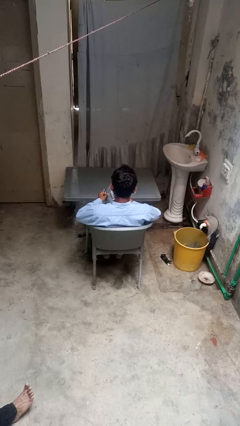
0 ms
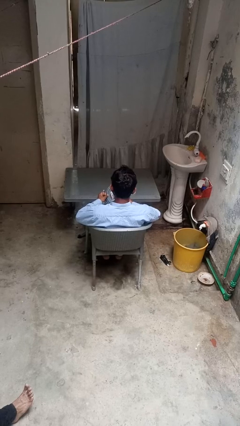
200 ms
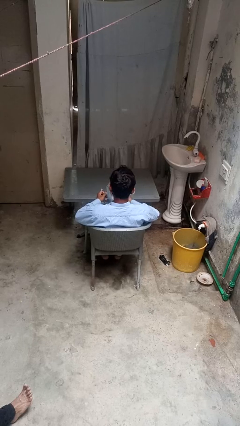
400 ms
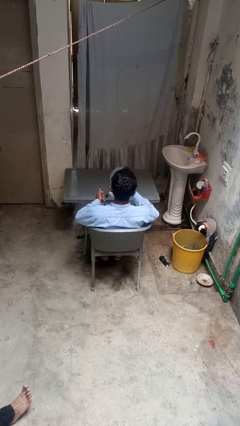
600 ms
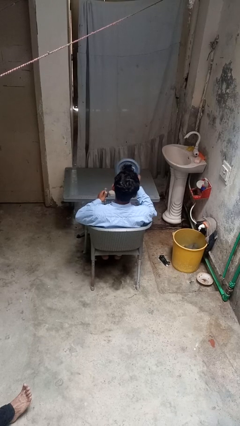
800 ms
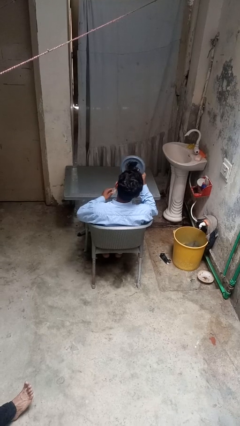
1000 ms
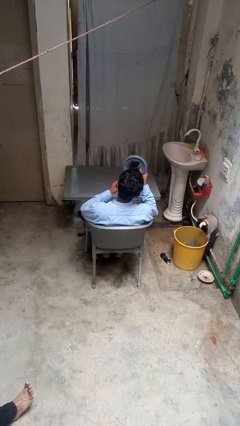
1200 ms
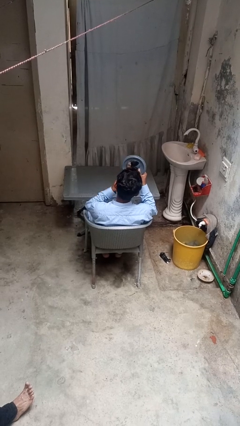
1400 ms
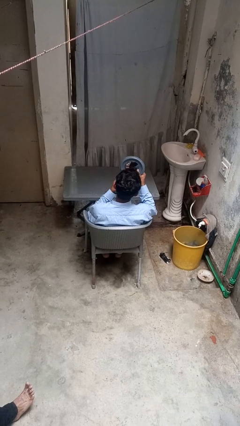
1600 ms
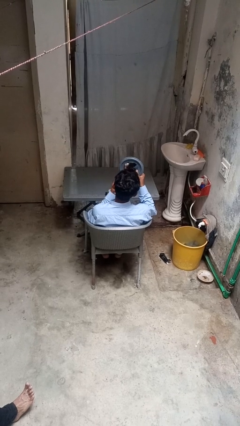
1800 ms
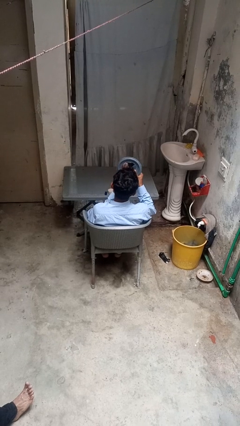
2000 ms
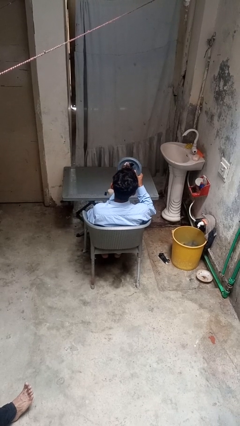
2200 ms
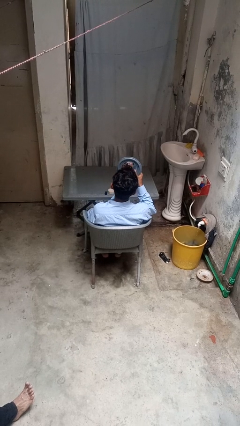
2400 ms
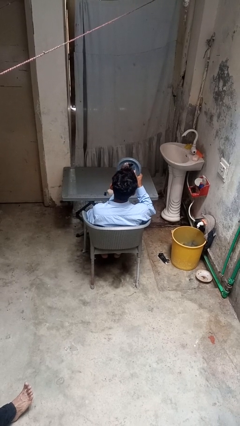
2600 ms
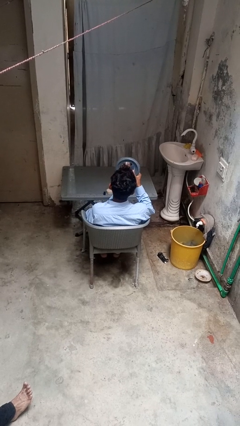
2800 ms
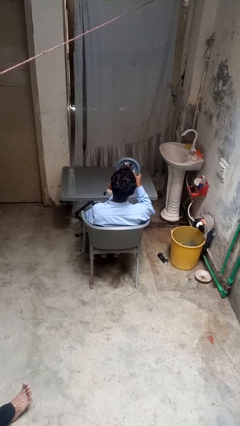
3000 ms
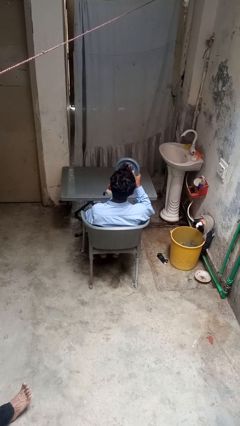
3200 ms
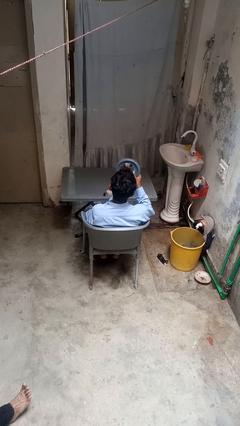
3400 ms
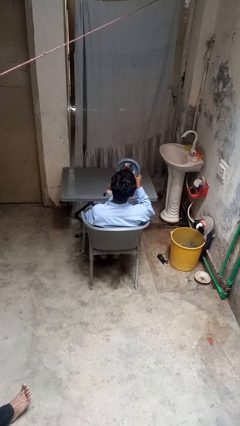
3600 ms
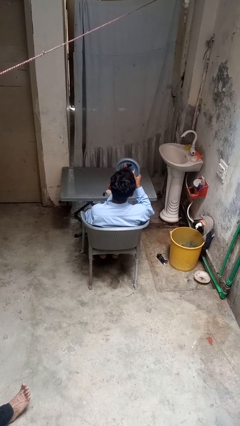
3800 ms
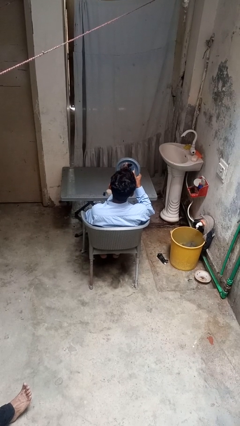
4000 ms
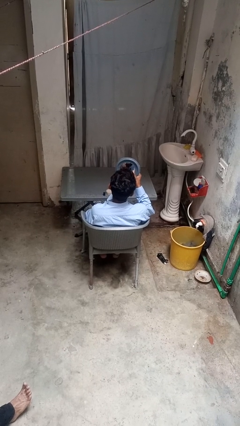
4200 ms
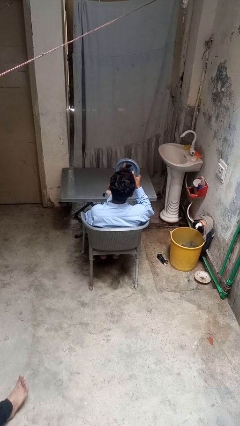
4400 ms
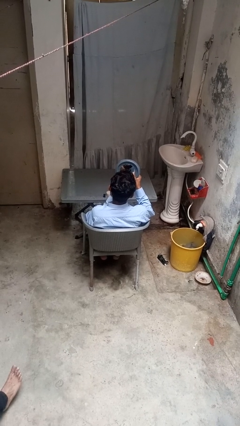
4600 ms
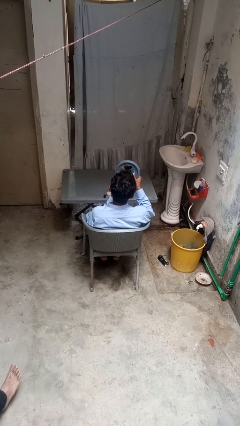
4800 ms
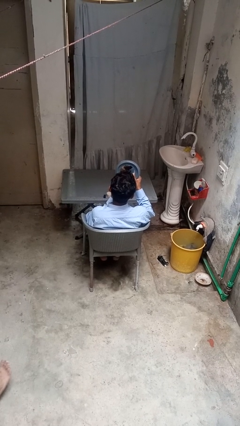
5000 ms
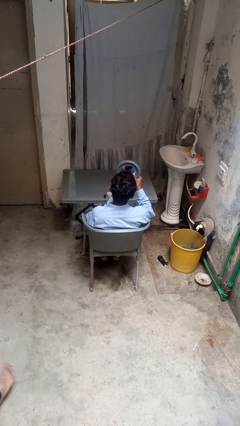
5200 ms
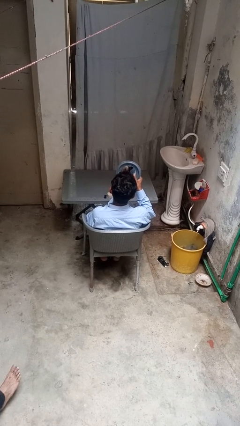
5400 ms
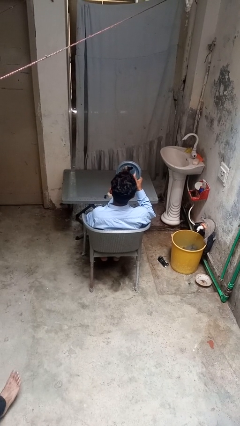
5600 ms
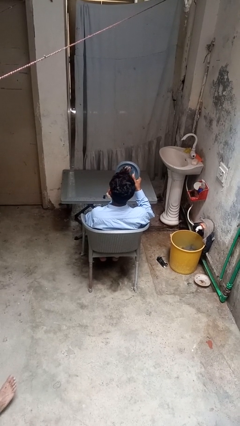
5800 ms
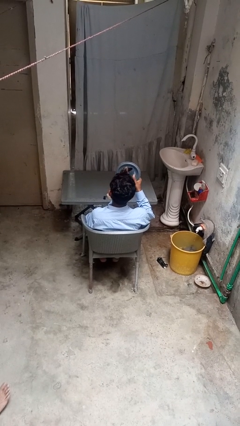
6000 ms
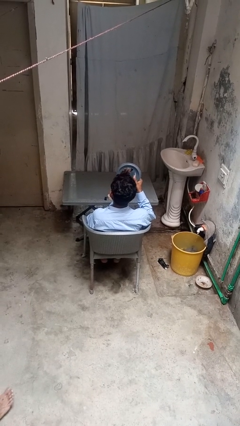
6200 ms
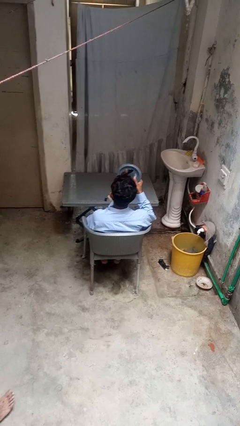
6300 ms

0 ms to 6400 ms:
person applies lip makeup

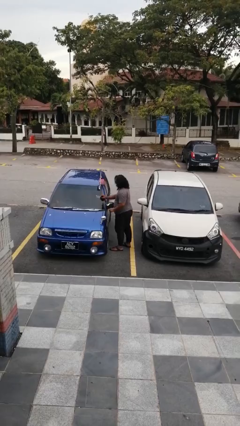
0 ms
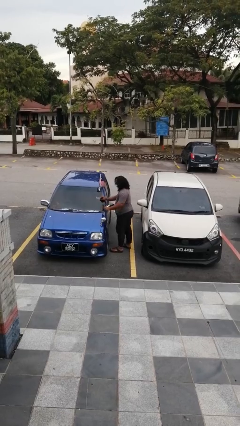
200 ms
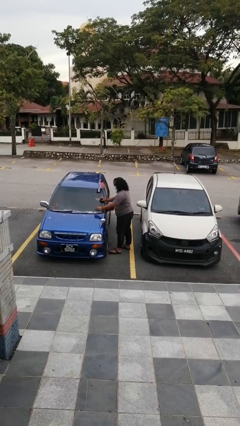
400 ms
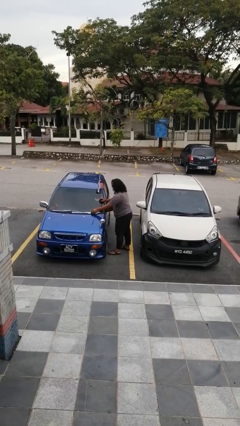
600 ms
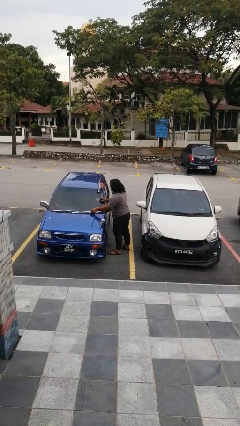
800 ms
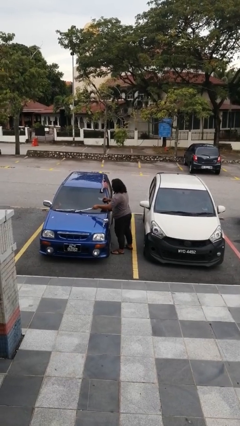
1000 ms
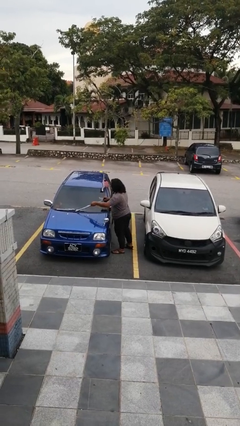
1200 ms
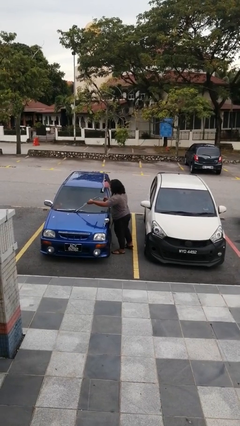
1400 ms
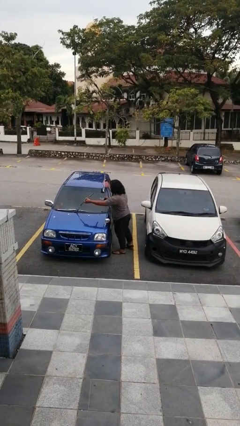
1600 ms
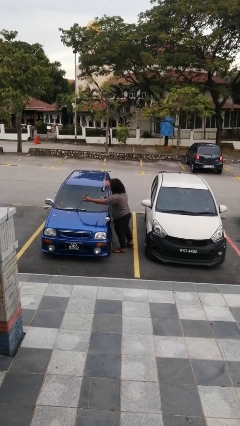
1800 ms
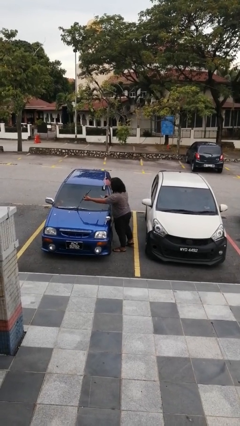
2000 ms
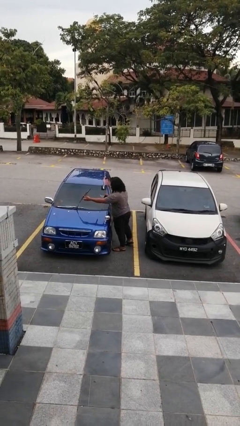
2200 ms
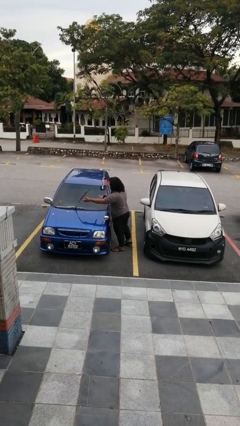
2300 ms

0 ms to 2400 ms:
person flips up car wipers

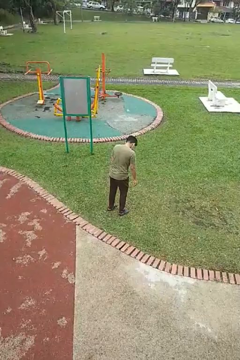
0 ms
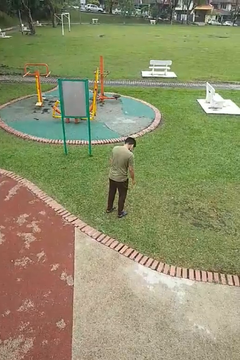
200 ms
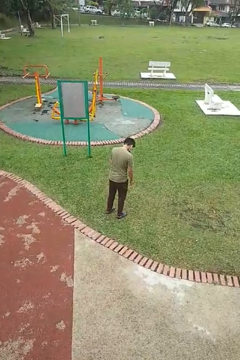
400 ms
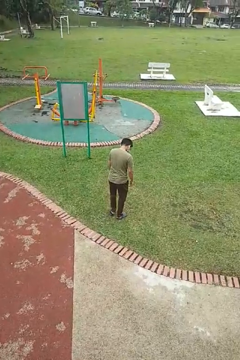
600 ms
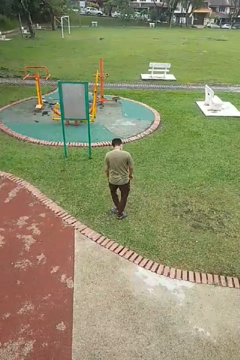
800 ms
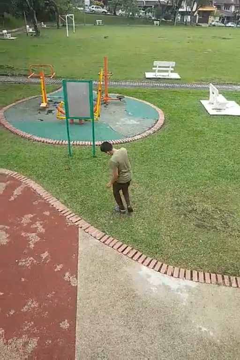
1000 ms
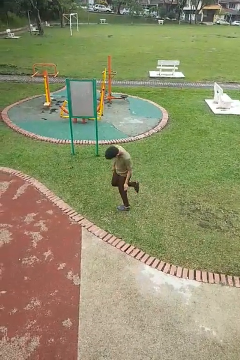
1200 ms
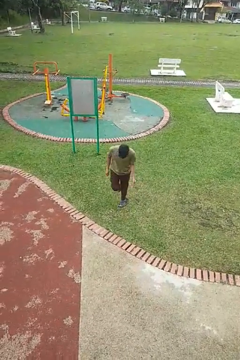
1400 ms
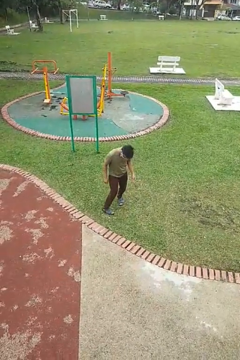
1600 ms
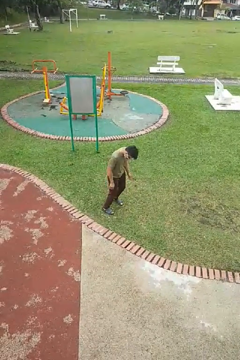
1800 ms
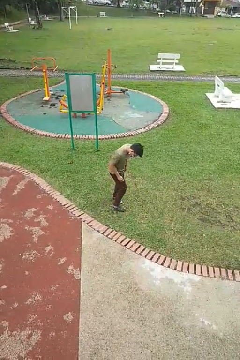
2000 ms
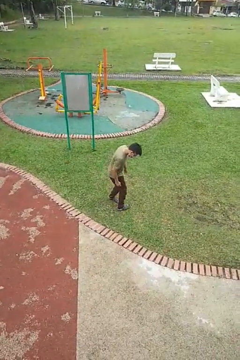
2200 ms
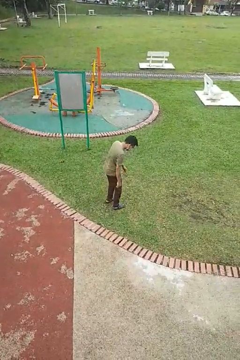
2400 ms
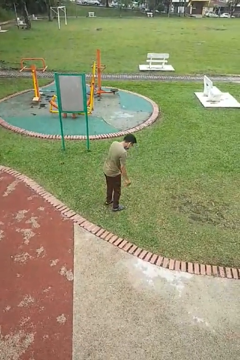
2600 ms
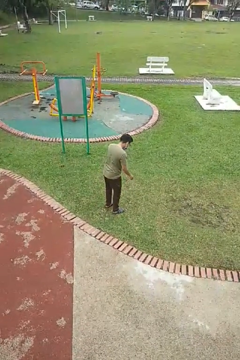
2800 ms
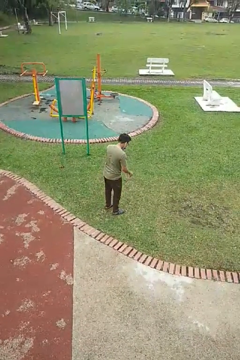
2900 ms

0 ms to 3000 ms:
person twirls

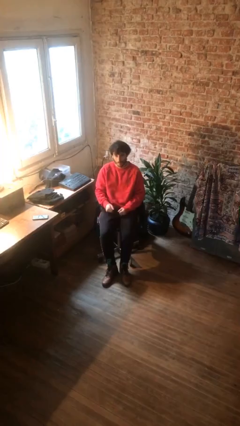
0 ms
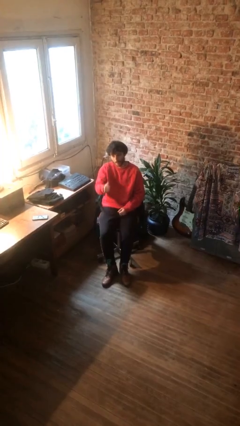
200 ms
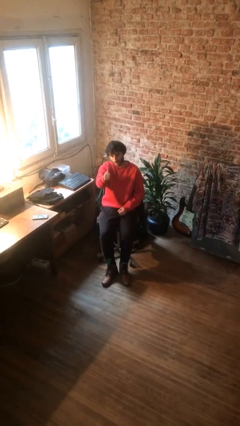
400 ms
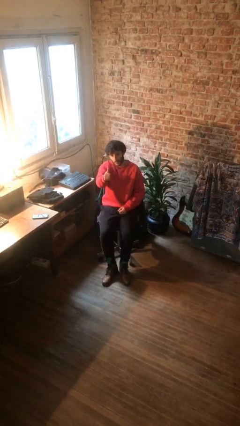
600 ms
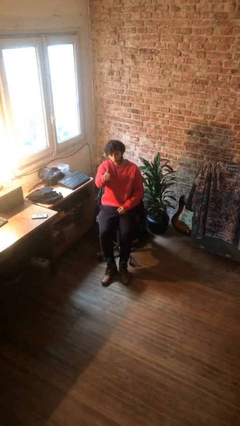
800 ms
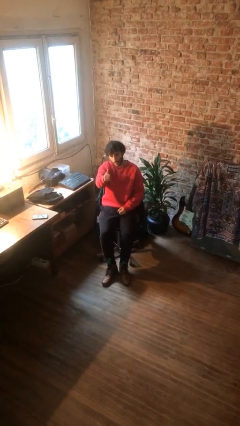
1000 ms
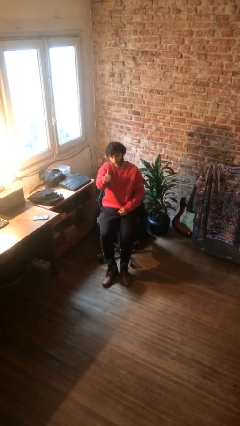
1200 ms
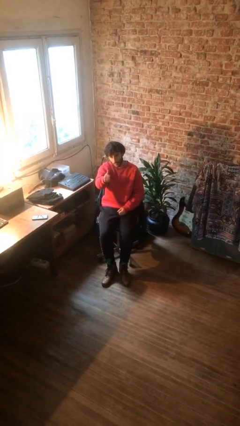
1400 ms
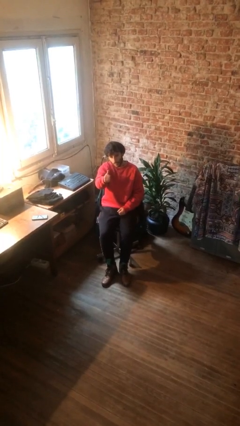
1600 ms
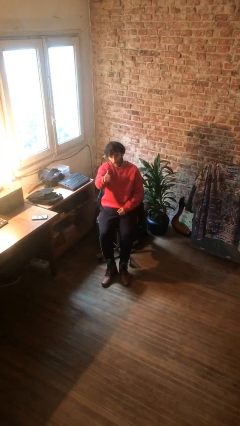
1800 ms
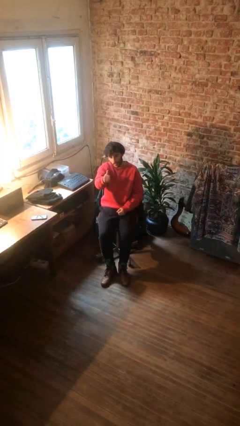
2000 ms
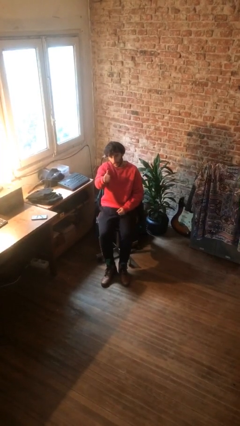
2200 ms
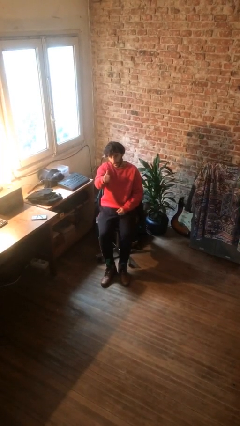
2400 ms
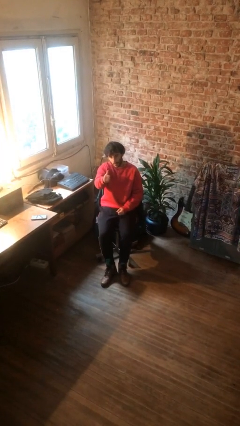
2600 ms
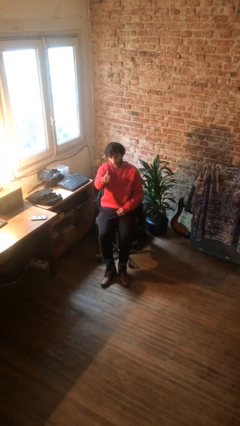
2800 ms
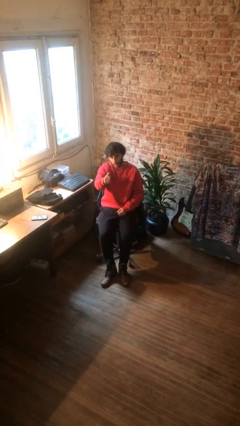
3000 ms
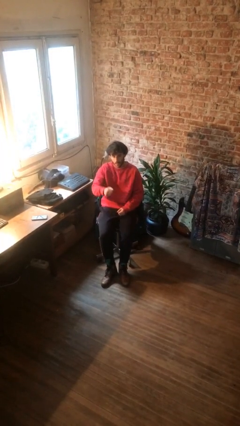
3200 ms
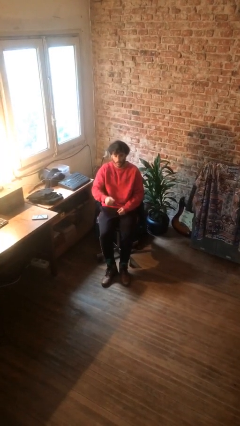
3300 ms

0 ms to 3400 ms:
person gestures thumbs up

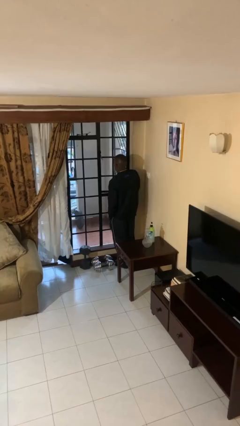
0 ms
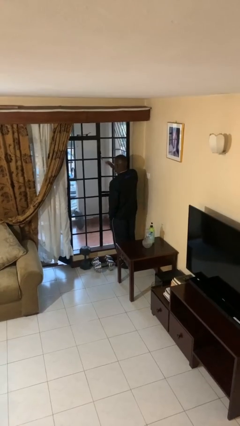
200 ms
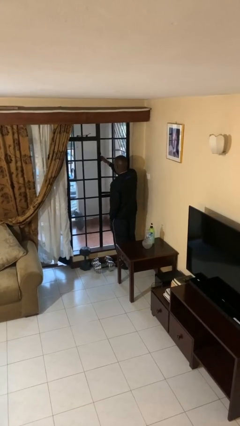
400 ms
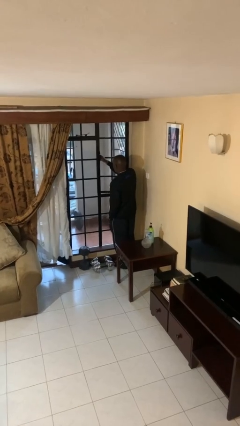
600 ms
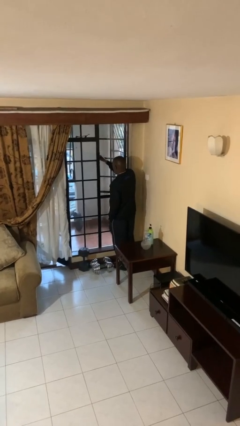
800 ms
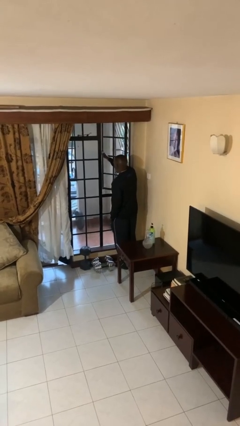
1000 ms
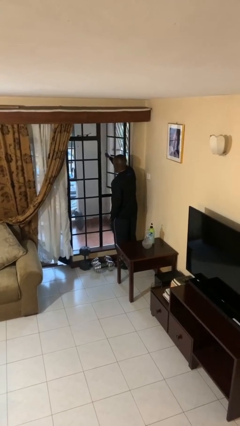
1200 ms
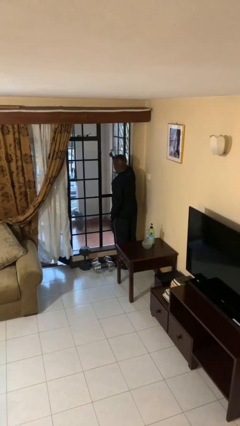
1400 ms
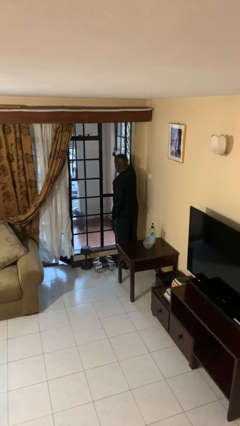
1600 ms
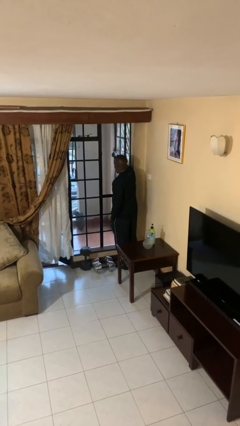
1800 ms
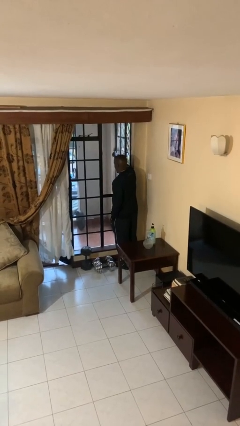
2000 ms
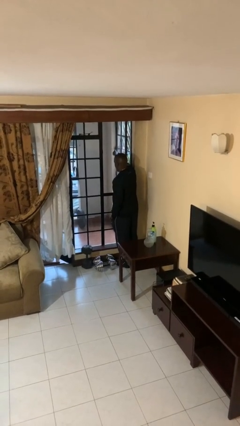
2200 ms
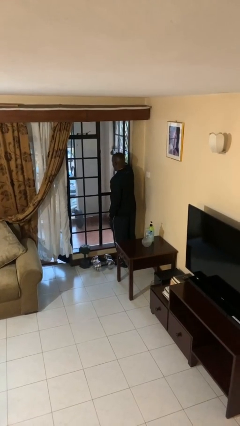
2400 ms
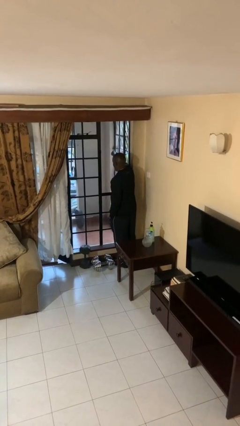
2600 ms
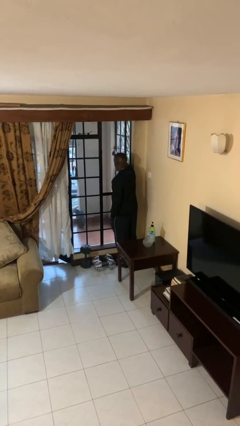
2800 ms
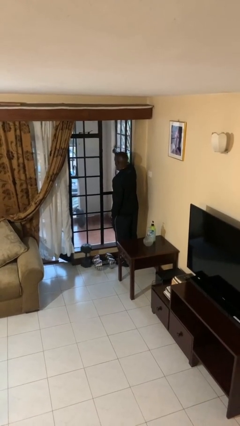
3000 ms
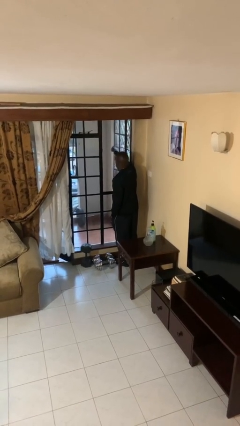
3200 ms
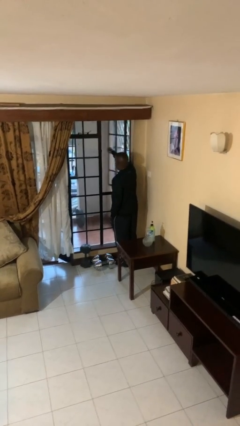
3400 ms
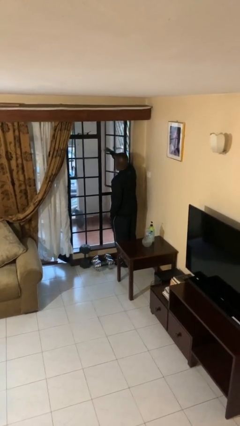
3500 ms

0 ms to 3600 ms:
person opens home window
